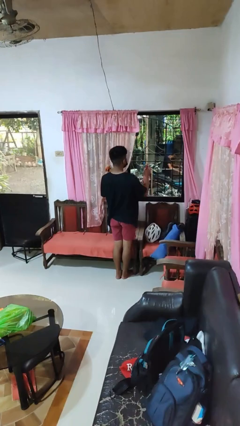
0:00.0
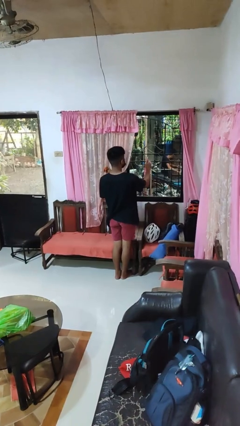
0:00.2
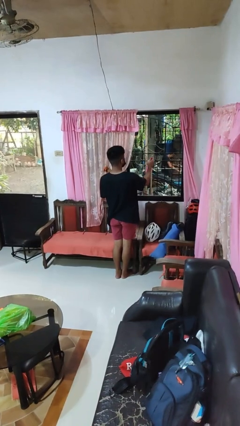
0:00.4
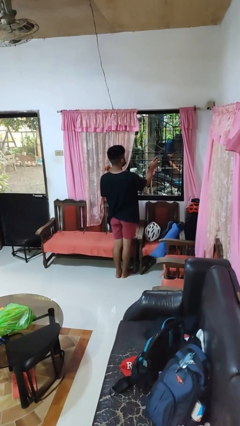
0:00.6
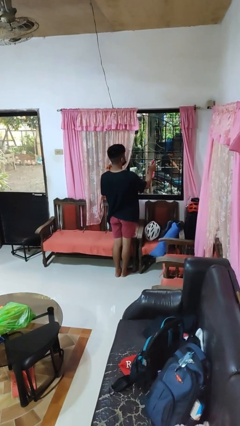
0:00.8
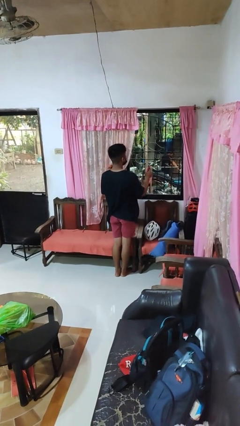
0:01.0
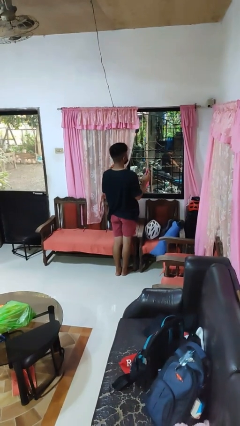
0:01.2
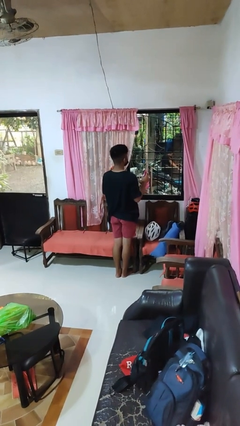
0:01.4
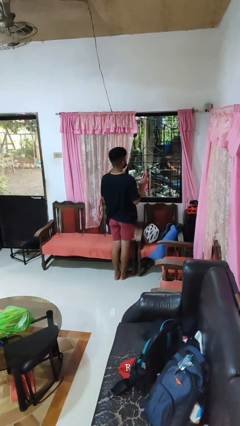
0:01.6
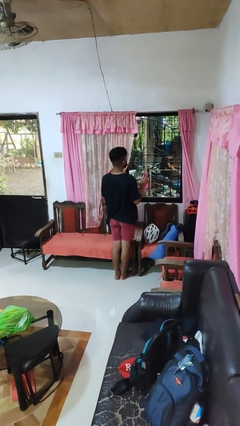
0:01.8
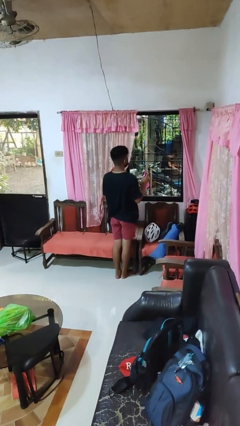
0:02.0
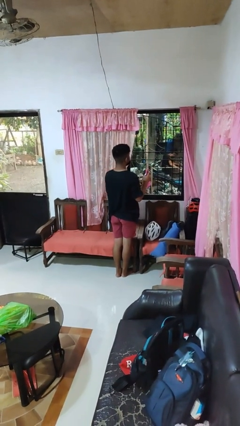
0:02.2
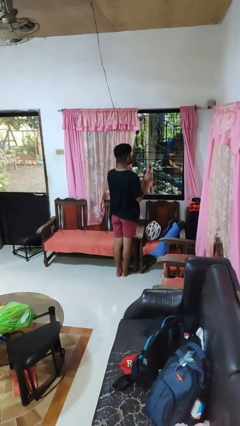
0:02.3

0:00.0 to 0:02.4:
person sprays from bottle

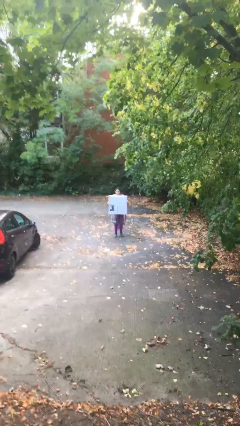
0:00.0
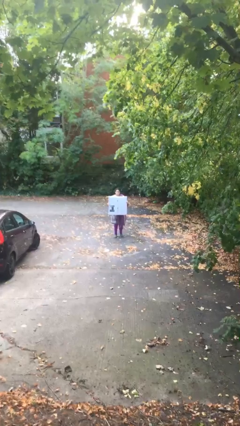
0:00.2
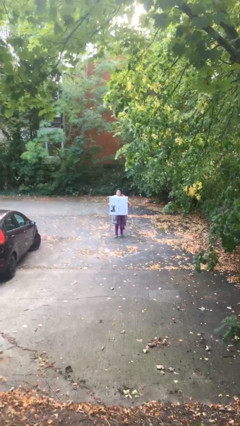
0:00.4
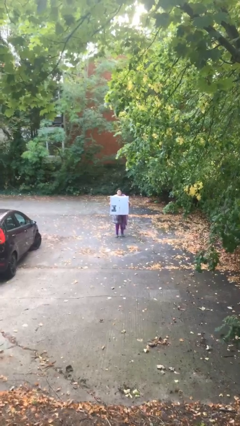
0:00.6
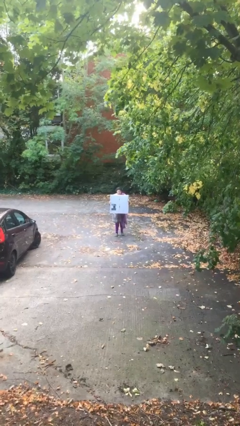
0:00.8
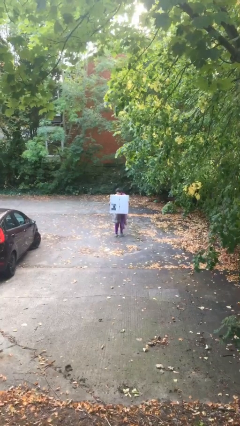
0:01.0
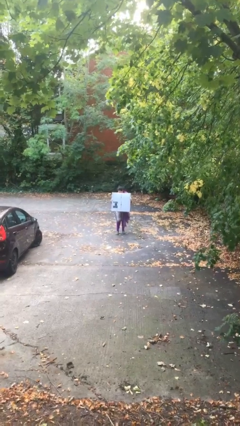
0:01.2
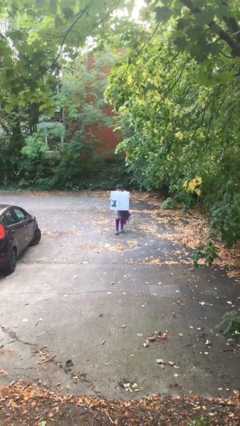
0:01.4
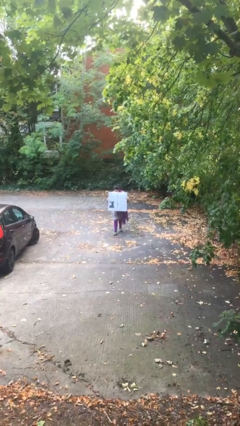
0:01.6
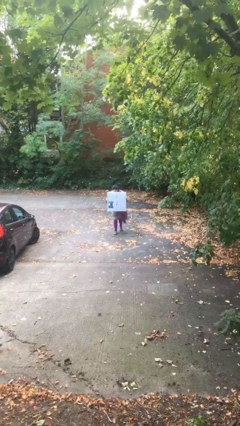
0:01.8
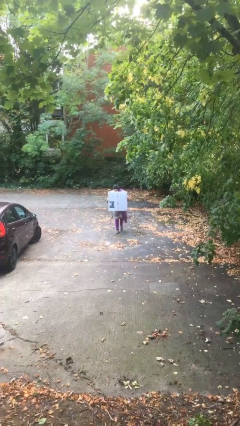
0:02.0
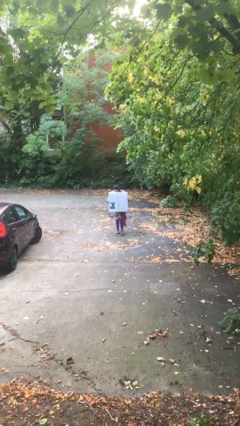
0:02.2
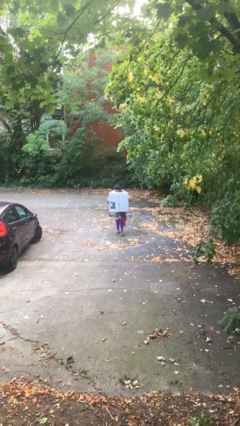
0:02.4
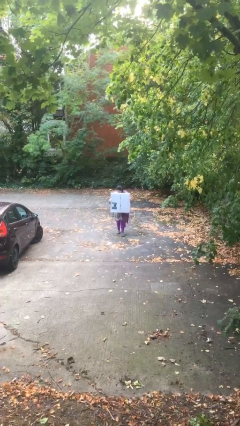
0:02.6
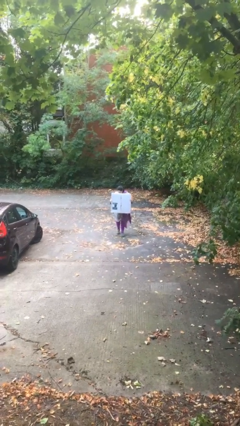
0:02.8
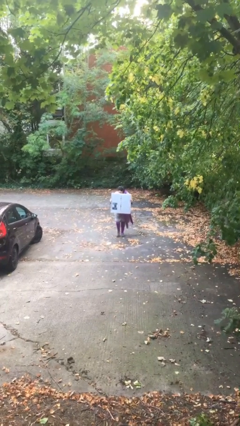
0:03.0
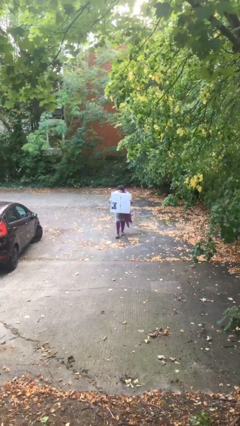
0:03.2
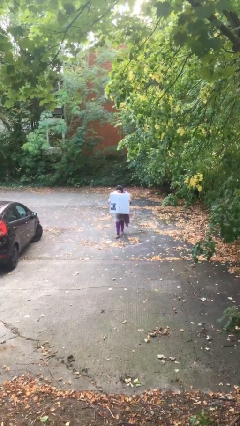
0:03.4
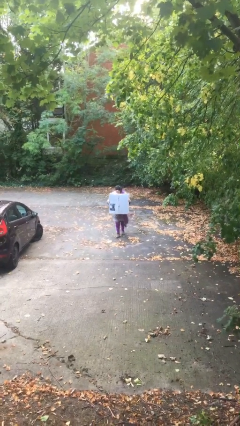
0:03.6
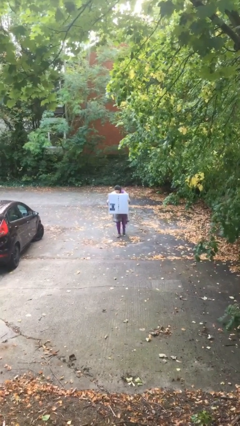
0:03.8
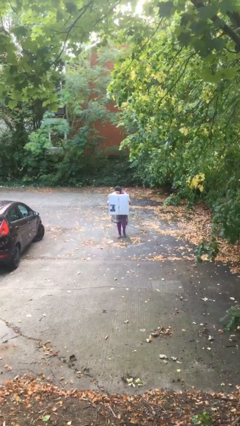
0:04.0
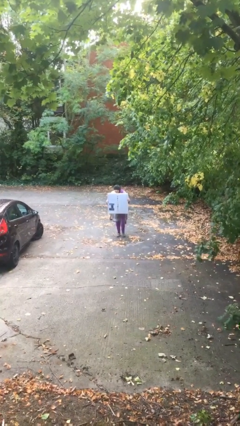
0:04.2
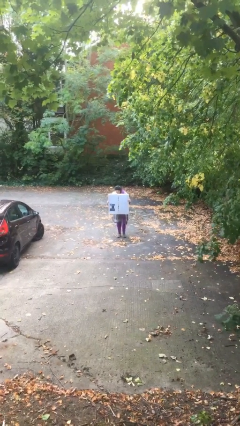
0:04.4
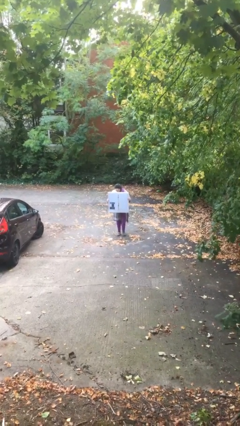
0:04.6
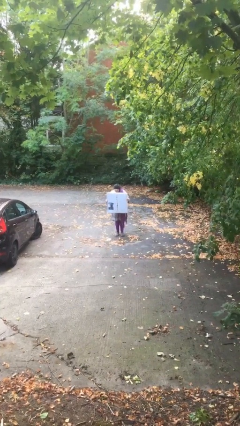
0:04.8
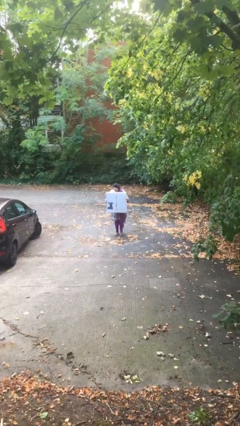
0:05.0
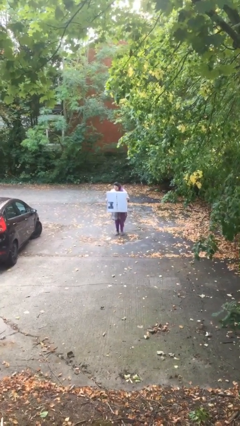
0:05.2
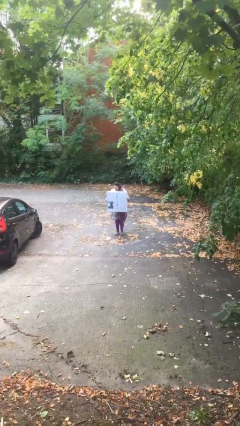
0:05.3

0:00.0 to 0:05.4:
person carries heavy object

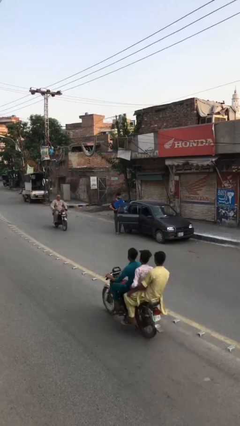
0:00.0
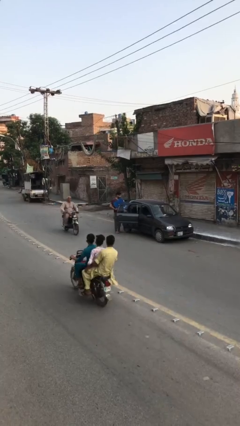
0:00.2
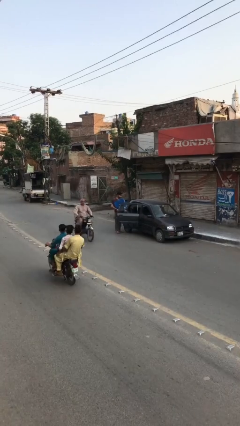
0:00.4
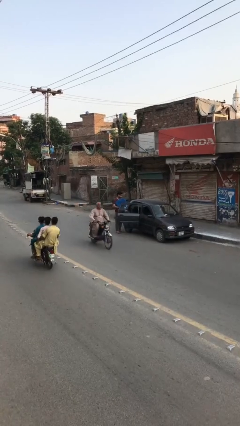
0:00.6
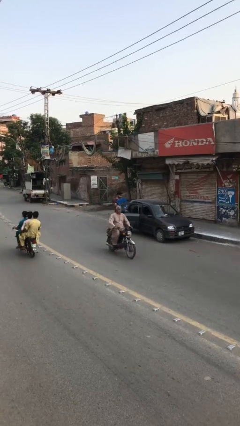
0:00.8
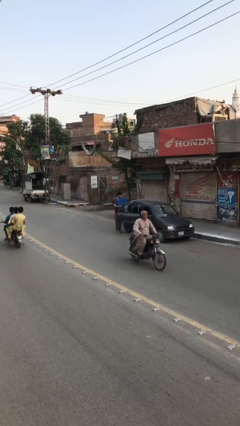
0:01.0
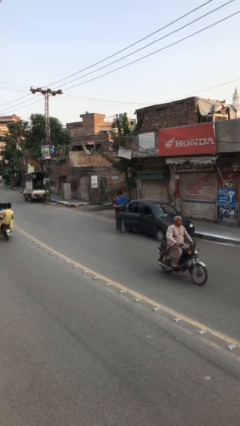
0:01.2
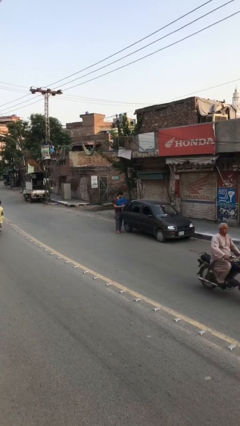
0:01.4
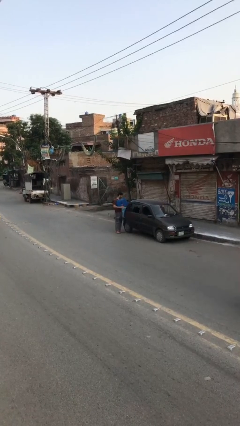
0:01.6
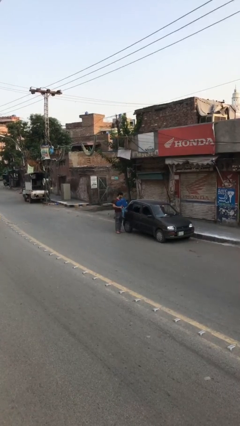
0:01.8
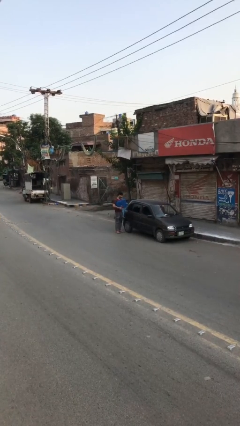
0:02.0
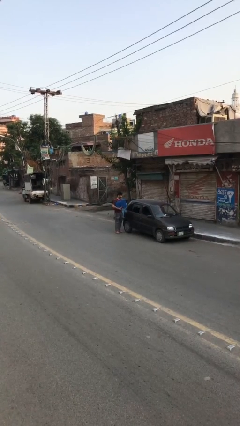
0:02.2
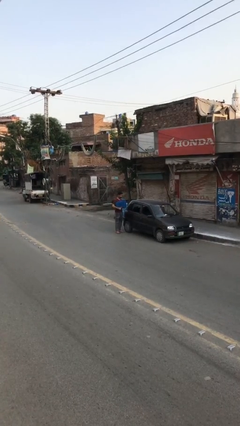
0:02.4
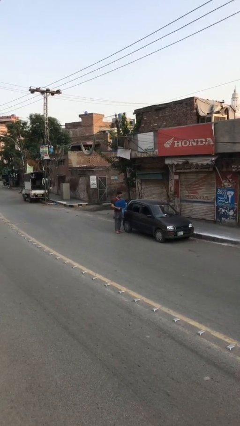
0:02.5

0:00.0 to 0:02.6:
person closes car door

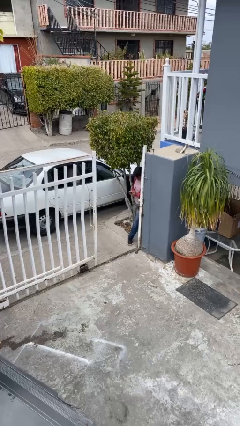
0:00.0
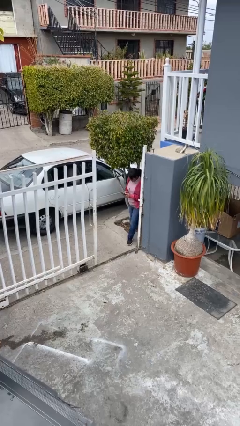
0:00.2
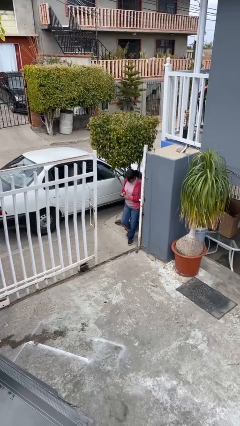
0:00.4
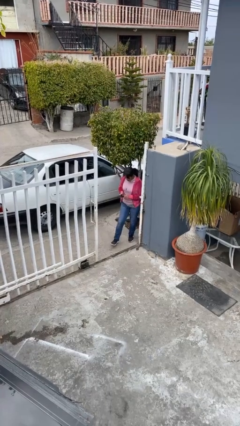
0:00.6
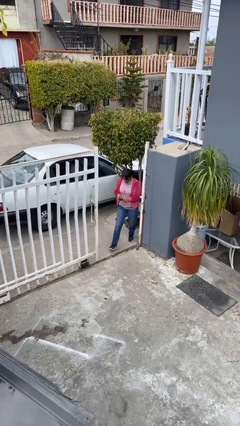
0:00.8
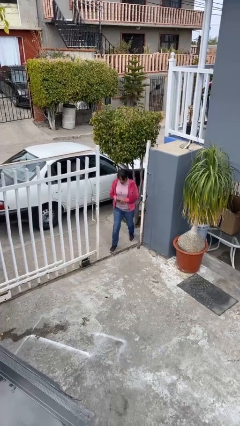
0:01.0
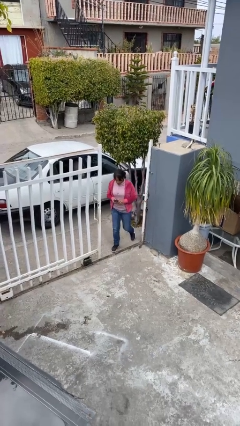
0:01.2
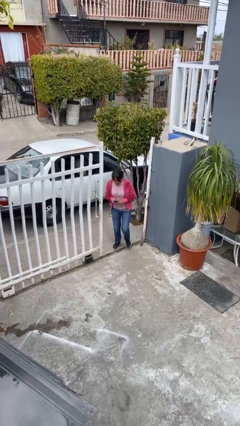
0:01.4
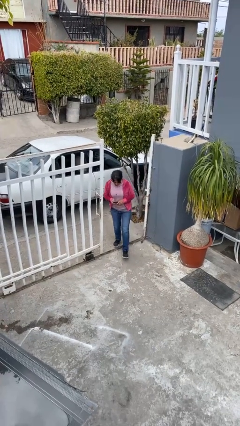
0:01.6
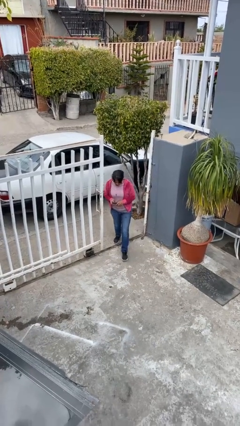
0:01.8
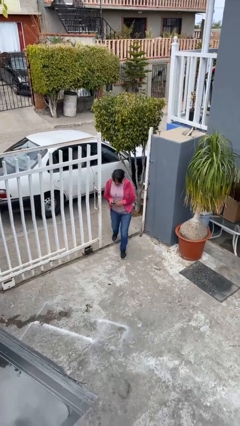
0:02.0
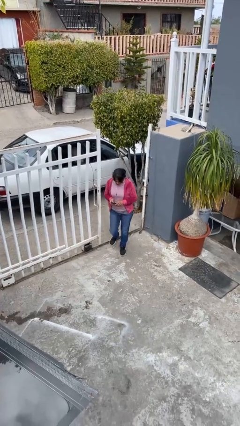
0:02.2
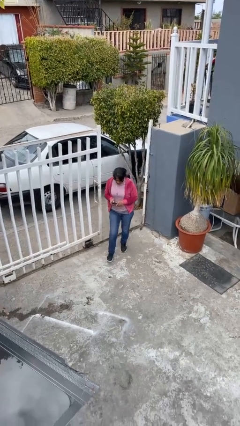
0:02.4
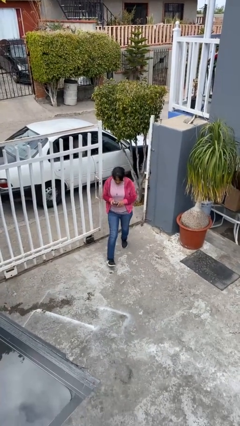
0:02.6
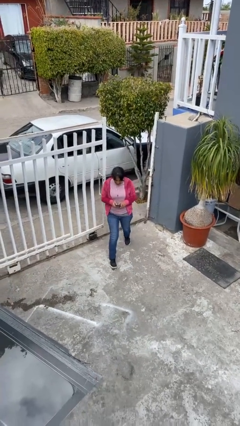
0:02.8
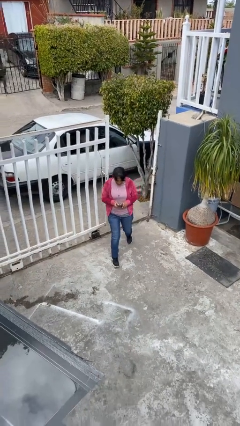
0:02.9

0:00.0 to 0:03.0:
person enters scene through structure

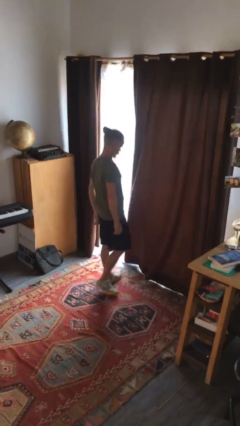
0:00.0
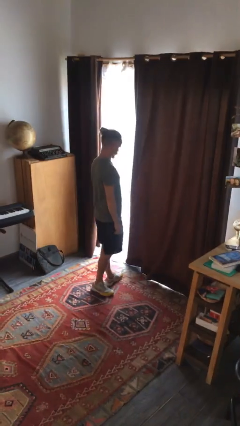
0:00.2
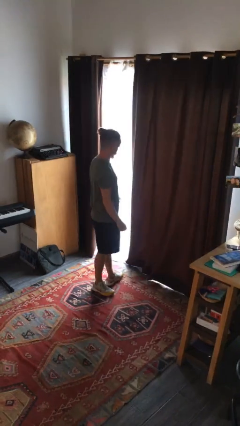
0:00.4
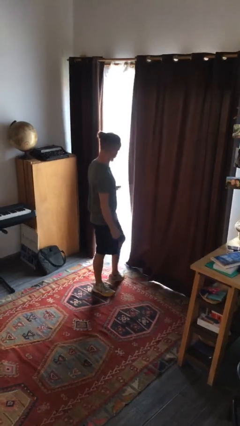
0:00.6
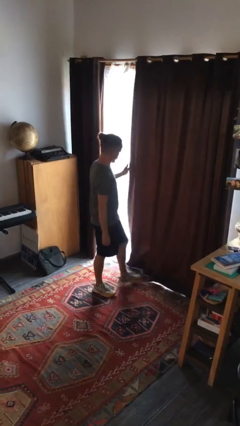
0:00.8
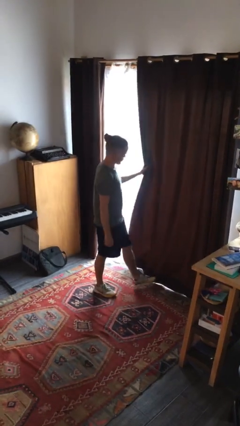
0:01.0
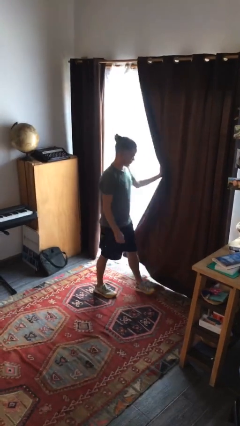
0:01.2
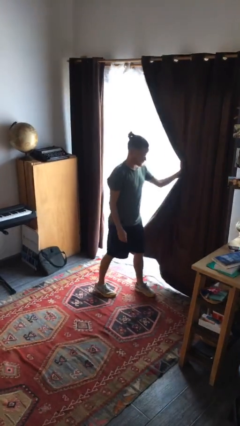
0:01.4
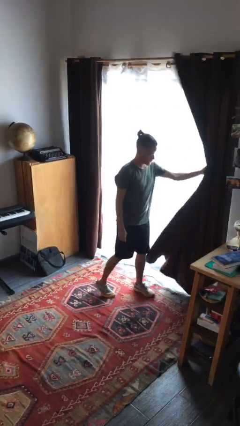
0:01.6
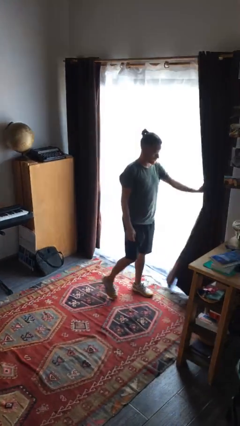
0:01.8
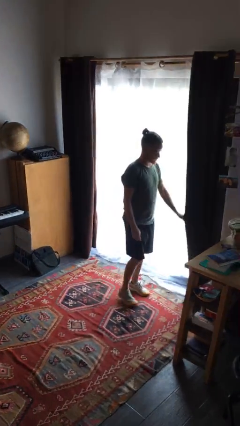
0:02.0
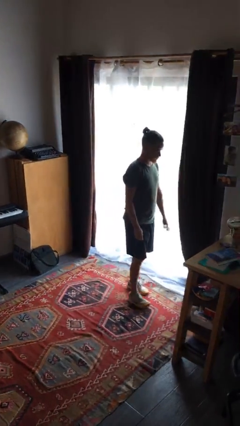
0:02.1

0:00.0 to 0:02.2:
person opens curtains

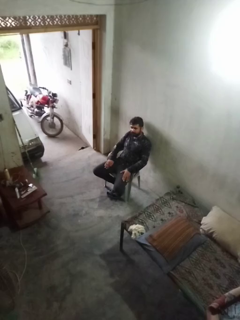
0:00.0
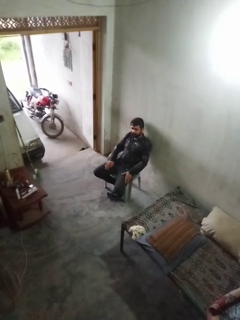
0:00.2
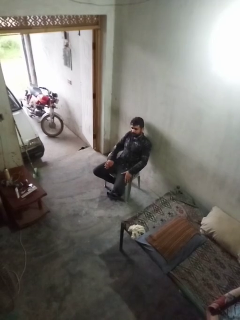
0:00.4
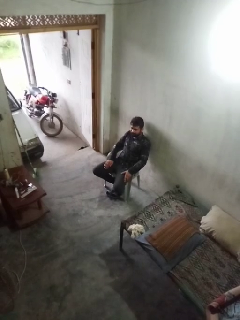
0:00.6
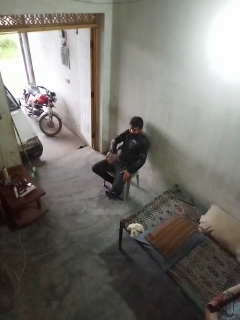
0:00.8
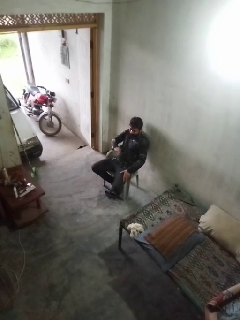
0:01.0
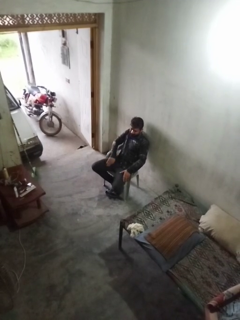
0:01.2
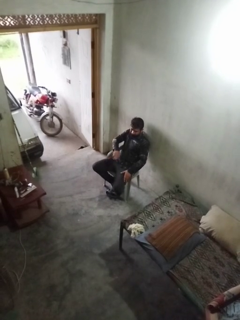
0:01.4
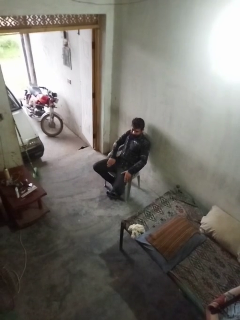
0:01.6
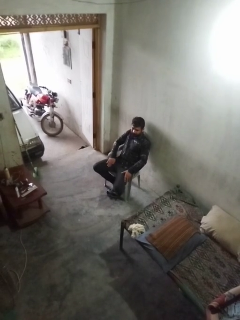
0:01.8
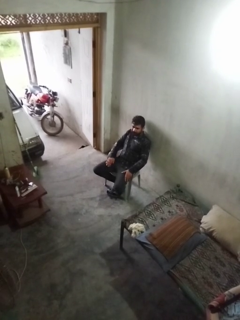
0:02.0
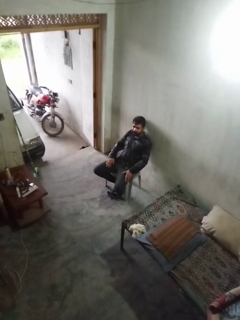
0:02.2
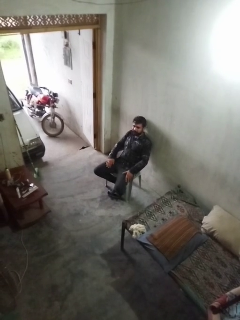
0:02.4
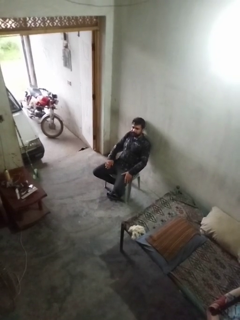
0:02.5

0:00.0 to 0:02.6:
person slaps hands on thighs
